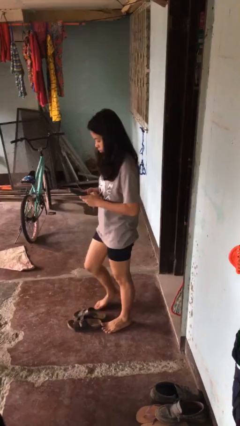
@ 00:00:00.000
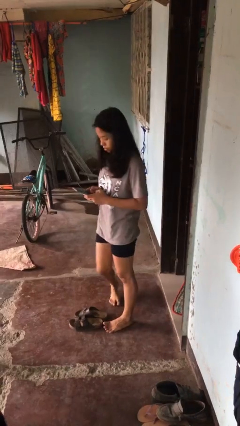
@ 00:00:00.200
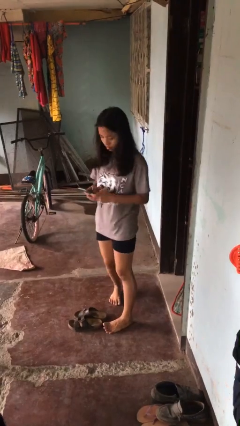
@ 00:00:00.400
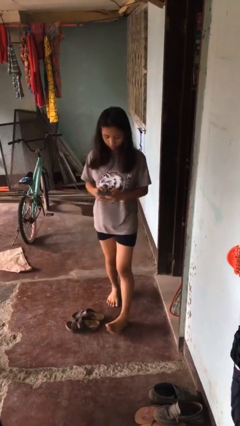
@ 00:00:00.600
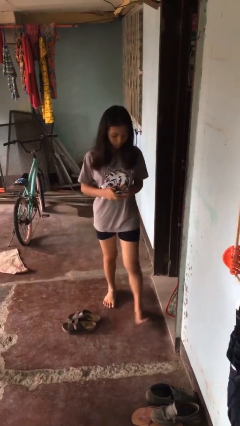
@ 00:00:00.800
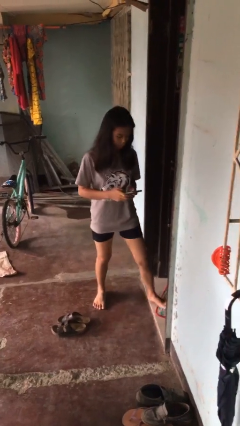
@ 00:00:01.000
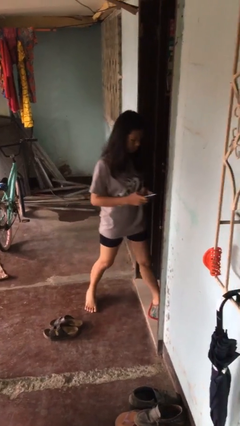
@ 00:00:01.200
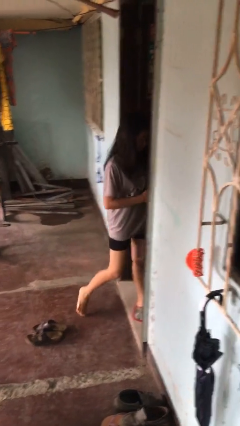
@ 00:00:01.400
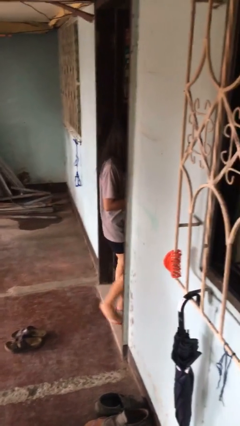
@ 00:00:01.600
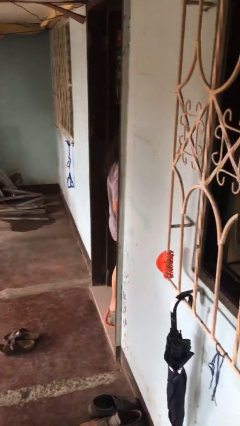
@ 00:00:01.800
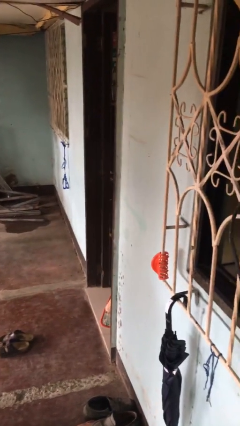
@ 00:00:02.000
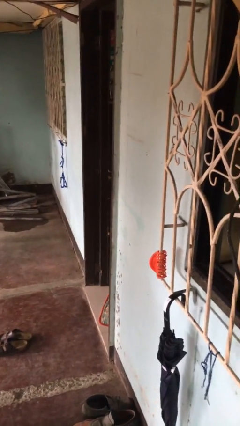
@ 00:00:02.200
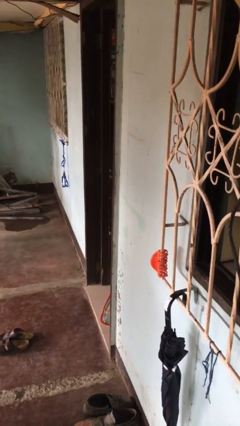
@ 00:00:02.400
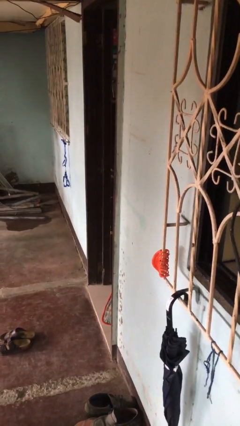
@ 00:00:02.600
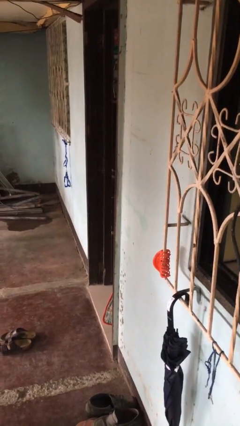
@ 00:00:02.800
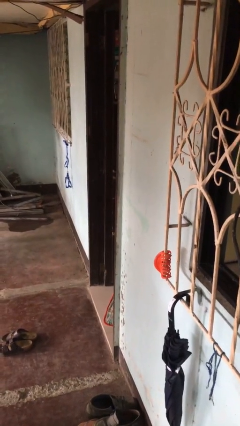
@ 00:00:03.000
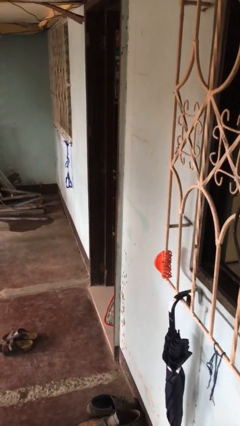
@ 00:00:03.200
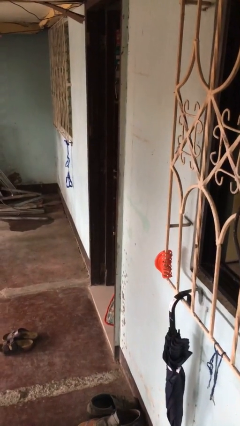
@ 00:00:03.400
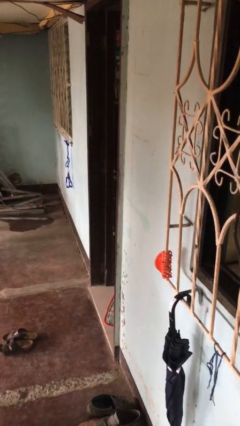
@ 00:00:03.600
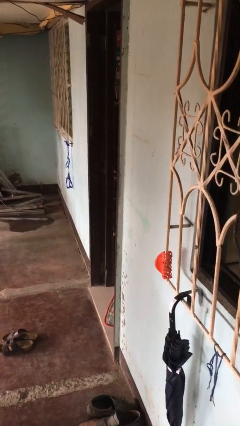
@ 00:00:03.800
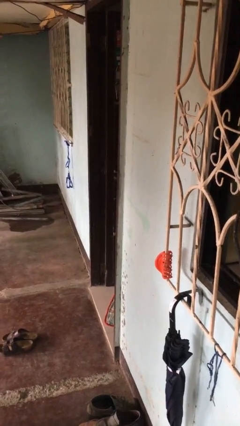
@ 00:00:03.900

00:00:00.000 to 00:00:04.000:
person exits scene through structure

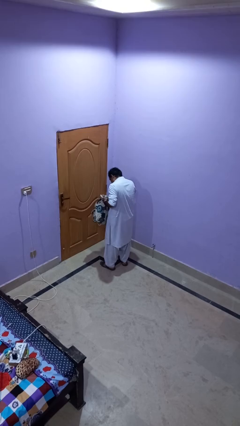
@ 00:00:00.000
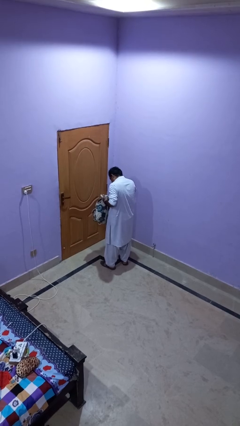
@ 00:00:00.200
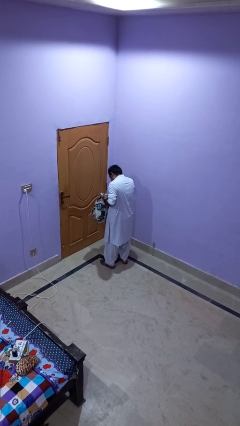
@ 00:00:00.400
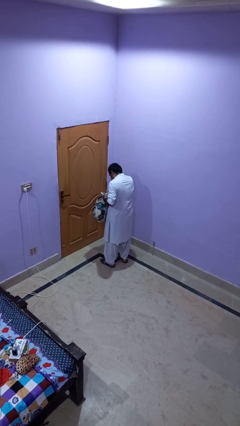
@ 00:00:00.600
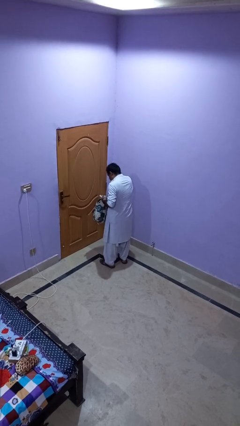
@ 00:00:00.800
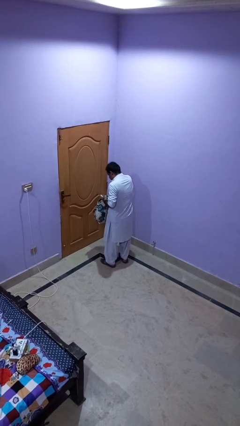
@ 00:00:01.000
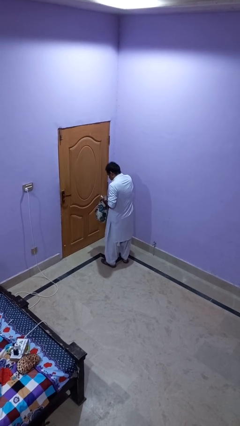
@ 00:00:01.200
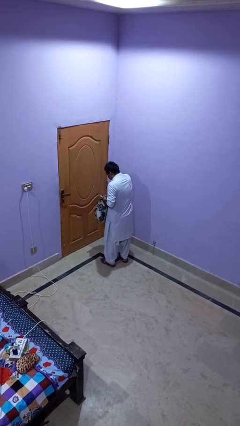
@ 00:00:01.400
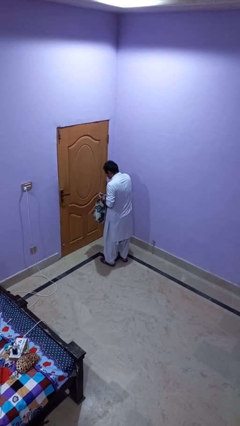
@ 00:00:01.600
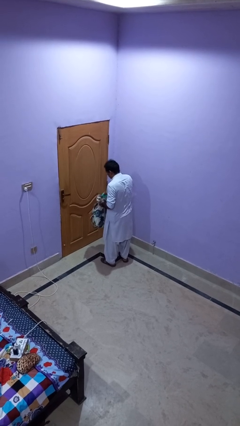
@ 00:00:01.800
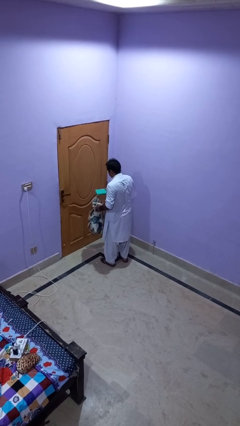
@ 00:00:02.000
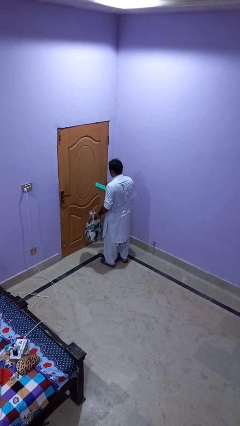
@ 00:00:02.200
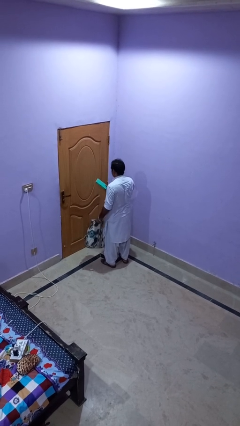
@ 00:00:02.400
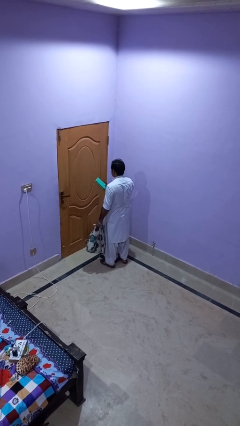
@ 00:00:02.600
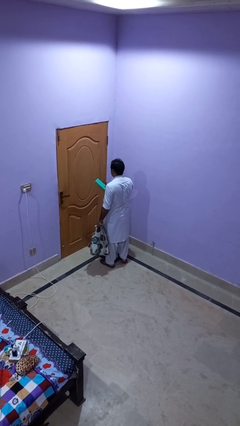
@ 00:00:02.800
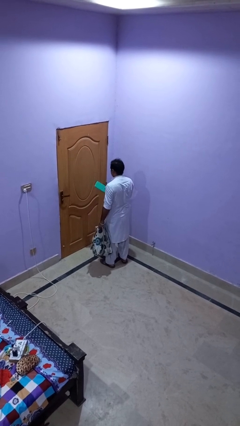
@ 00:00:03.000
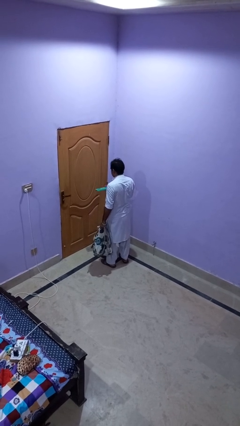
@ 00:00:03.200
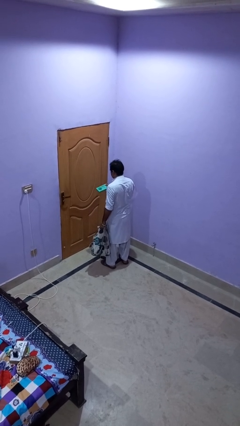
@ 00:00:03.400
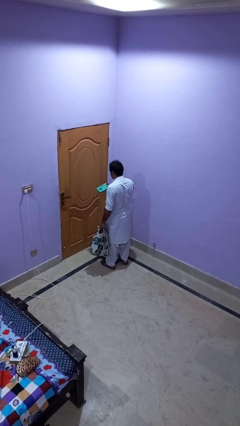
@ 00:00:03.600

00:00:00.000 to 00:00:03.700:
person takes object from backpack

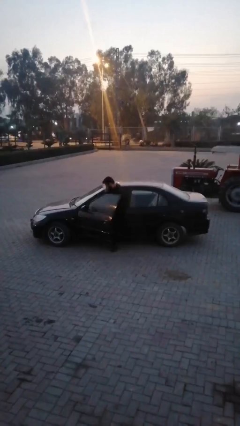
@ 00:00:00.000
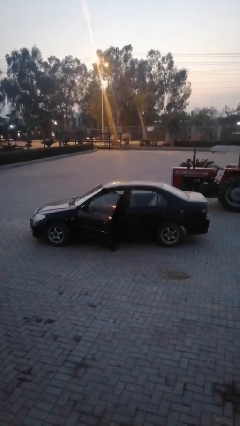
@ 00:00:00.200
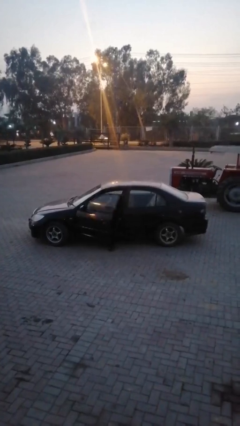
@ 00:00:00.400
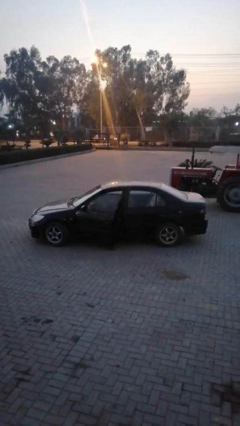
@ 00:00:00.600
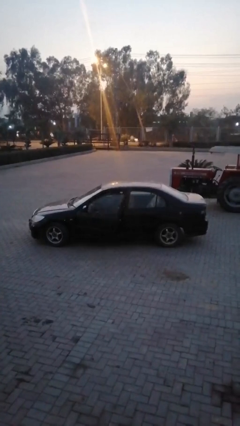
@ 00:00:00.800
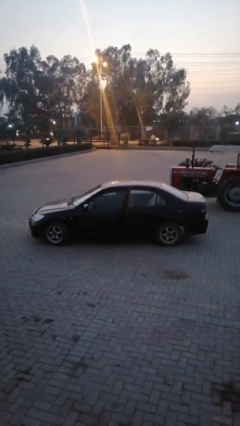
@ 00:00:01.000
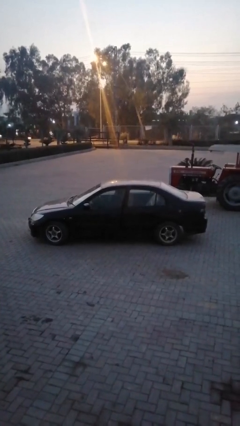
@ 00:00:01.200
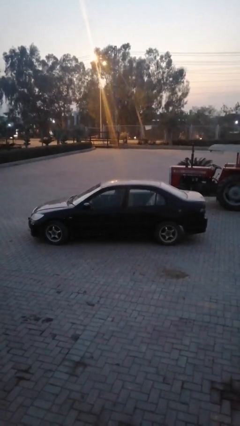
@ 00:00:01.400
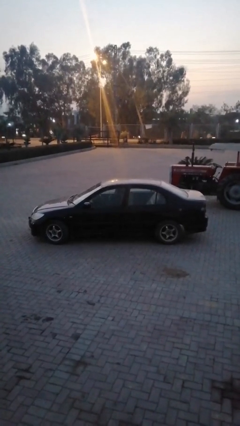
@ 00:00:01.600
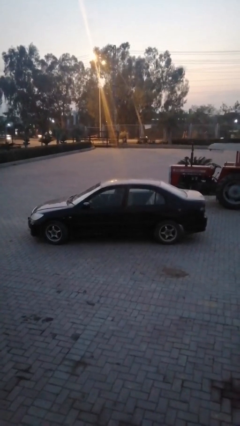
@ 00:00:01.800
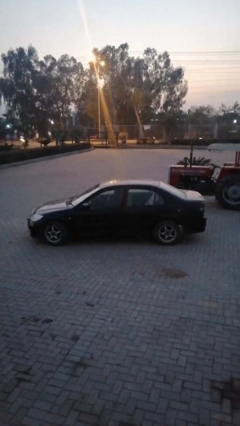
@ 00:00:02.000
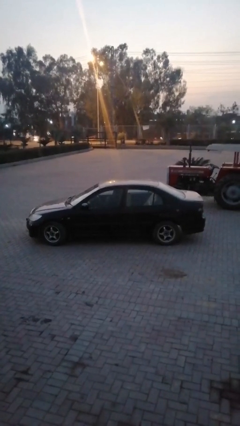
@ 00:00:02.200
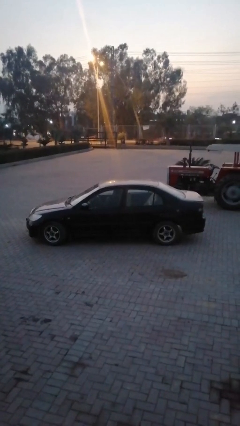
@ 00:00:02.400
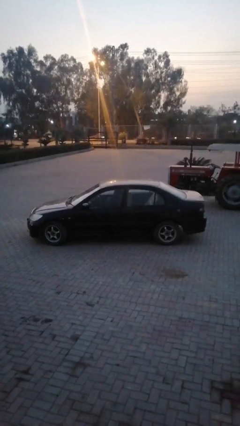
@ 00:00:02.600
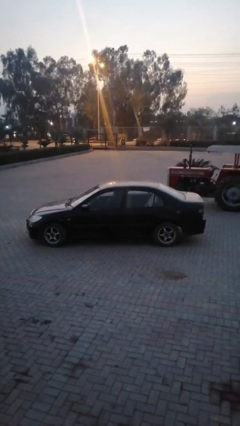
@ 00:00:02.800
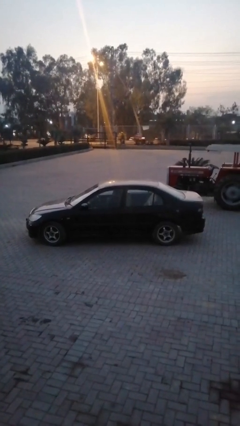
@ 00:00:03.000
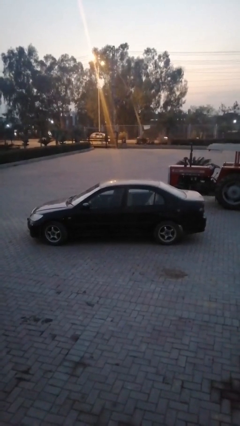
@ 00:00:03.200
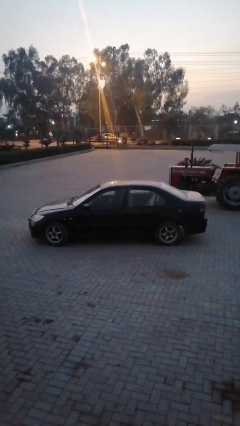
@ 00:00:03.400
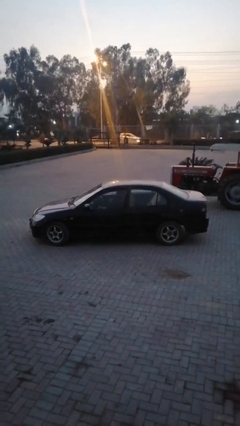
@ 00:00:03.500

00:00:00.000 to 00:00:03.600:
car picks up person

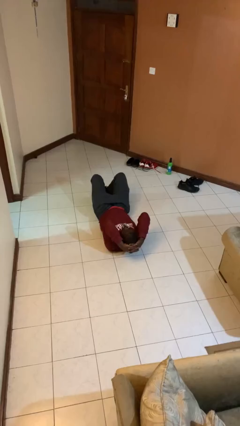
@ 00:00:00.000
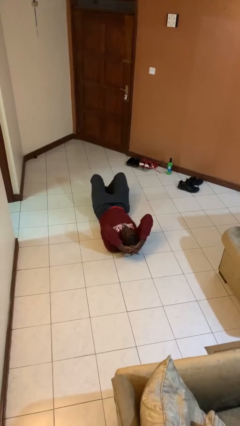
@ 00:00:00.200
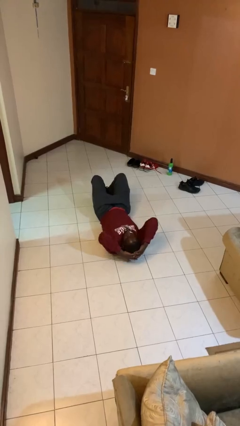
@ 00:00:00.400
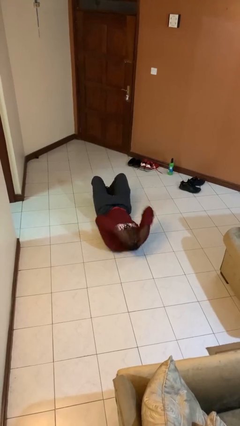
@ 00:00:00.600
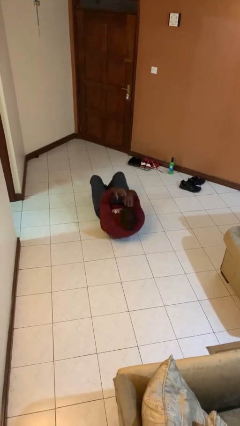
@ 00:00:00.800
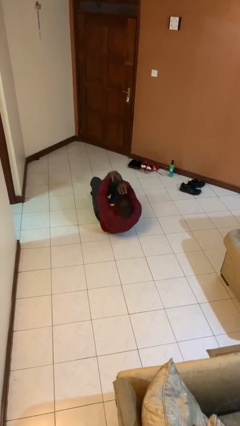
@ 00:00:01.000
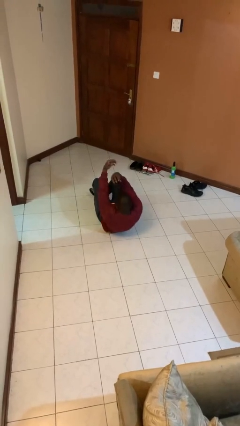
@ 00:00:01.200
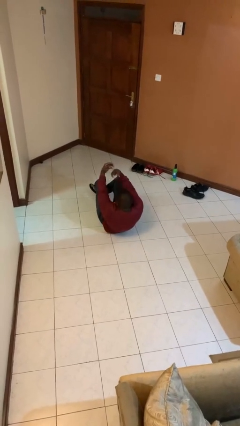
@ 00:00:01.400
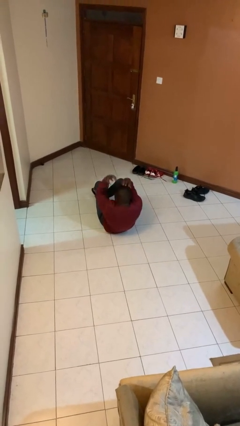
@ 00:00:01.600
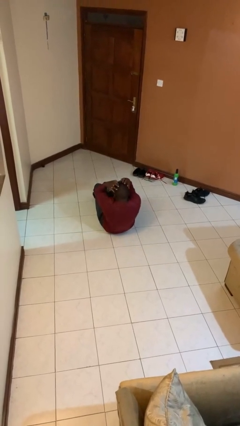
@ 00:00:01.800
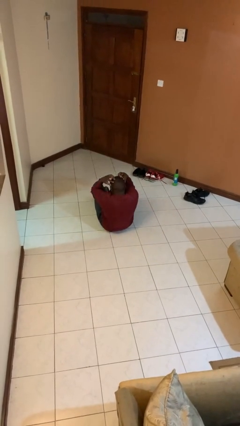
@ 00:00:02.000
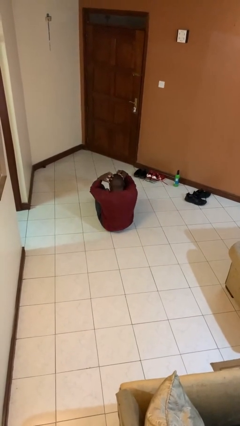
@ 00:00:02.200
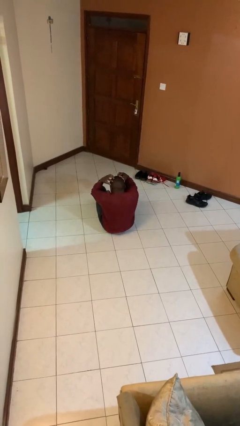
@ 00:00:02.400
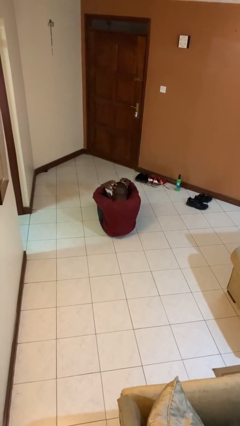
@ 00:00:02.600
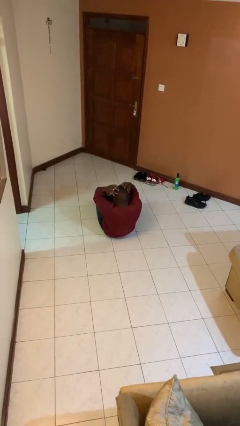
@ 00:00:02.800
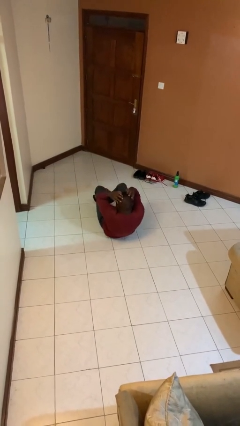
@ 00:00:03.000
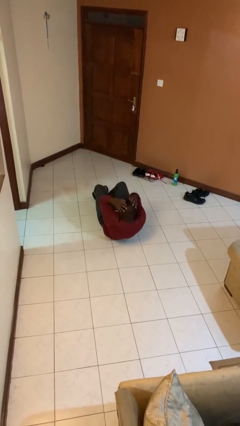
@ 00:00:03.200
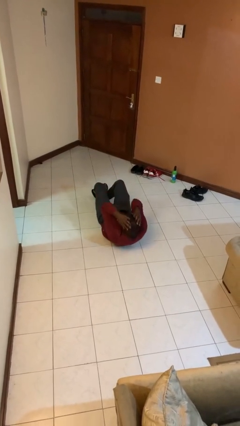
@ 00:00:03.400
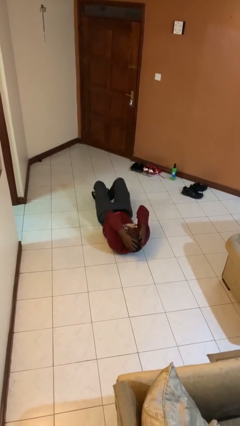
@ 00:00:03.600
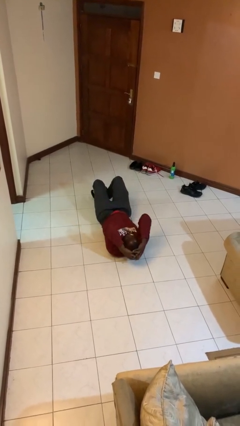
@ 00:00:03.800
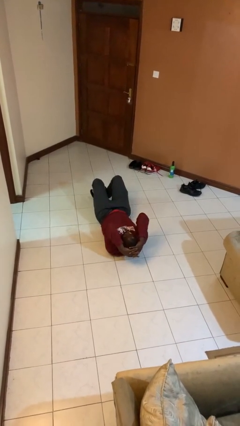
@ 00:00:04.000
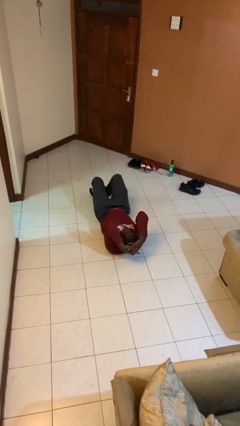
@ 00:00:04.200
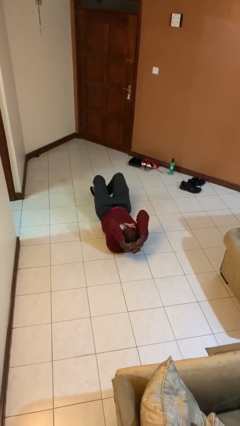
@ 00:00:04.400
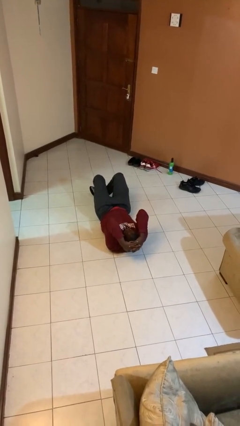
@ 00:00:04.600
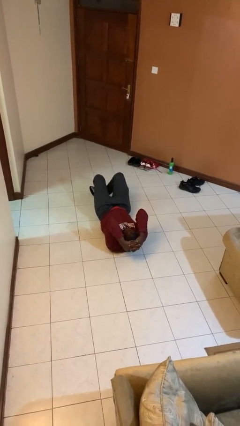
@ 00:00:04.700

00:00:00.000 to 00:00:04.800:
person exercises with situp

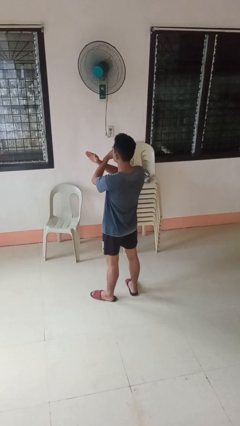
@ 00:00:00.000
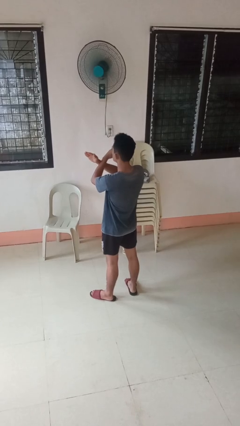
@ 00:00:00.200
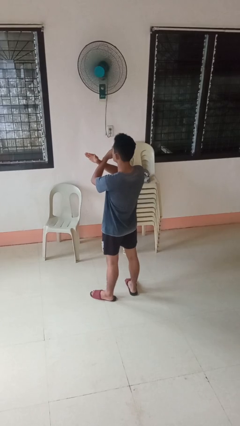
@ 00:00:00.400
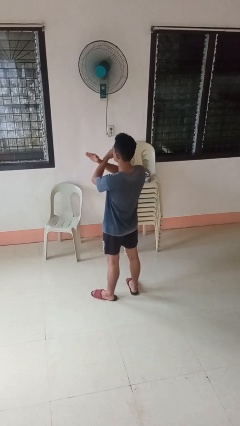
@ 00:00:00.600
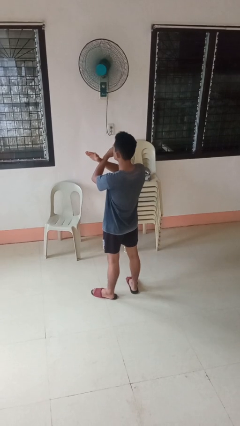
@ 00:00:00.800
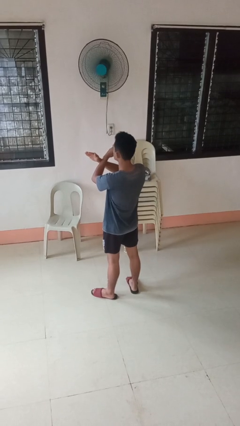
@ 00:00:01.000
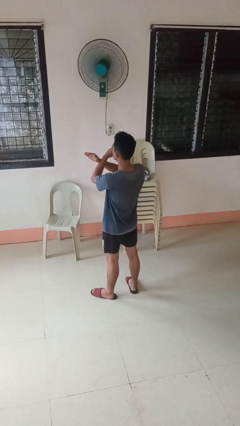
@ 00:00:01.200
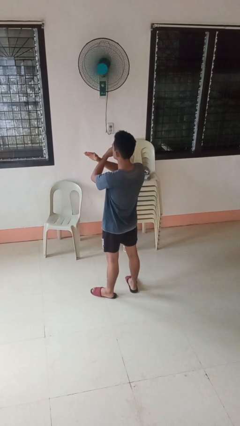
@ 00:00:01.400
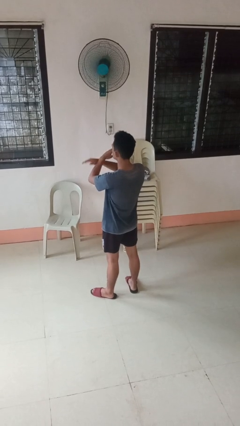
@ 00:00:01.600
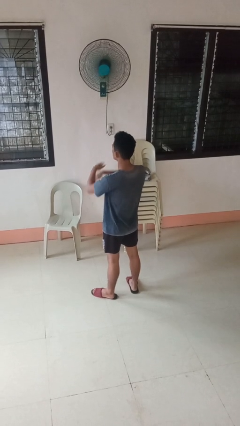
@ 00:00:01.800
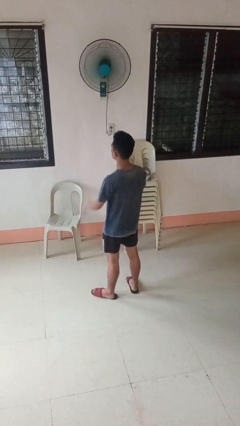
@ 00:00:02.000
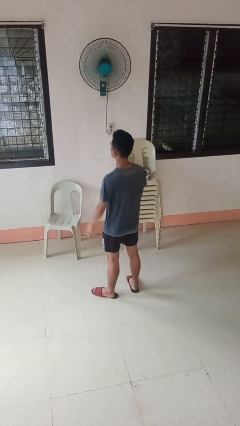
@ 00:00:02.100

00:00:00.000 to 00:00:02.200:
person gestures arms x
